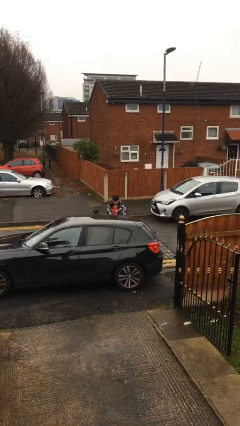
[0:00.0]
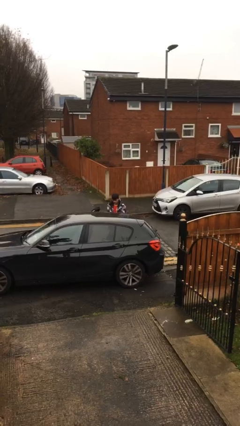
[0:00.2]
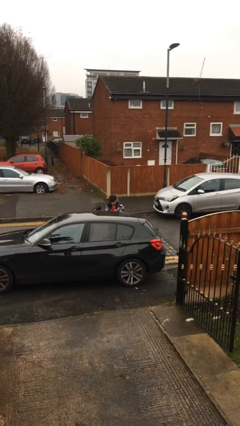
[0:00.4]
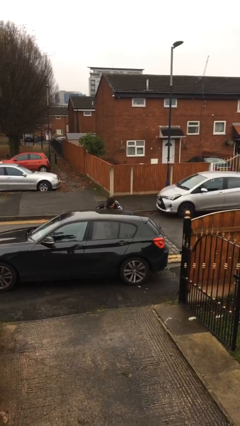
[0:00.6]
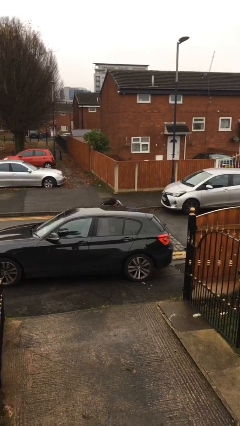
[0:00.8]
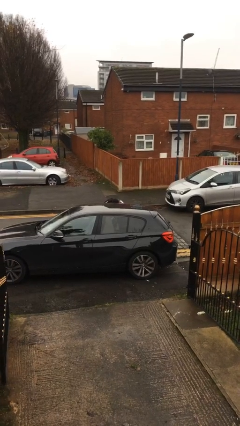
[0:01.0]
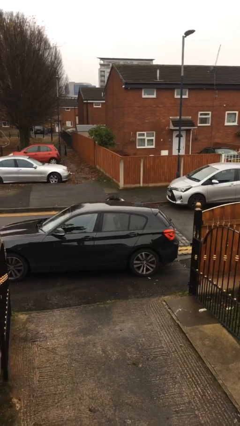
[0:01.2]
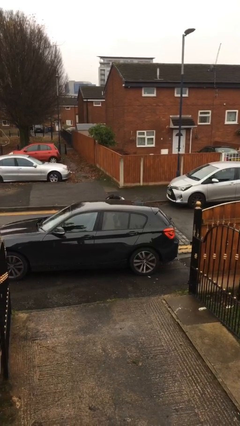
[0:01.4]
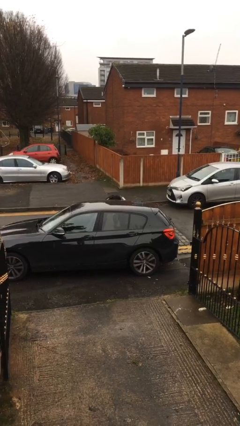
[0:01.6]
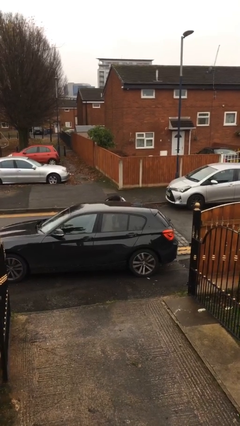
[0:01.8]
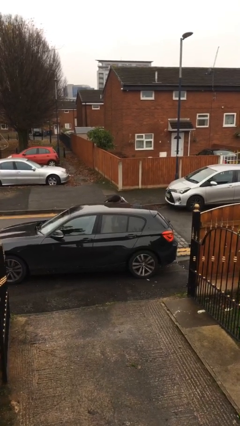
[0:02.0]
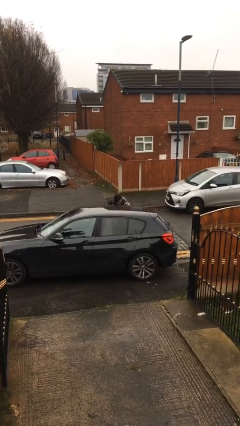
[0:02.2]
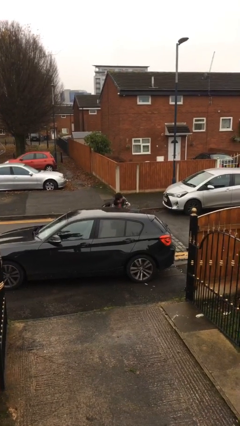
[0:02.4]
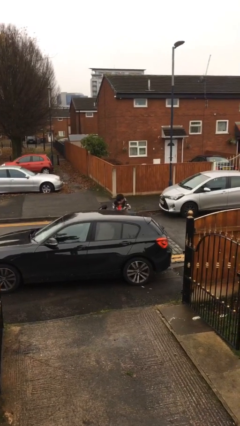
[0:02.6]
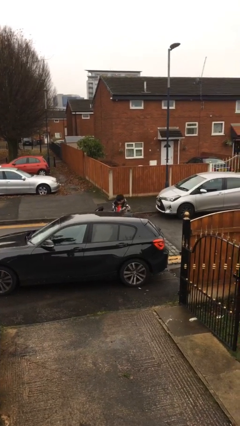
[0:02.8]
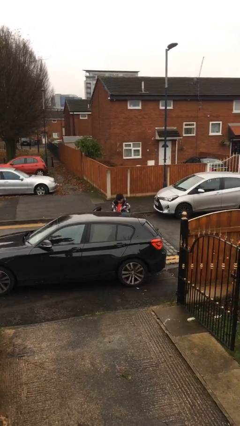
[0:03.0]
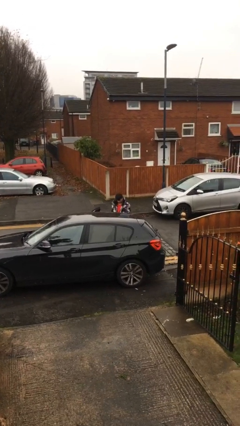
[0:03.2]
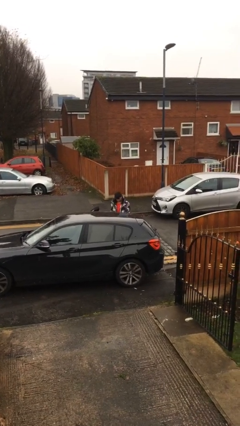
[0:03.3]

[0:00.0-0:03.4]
person unloads car

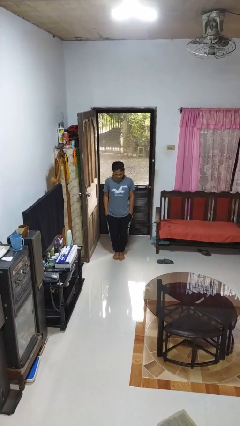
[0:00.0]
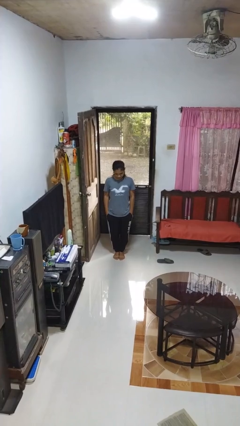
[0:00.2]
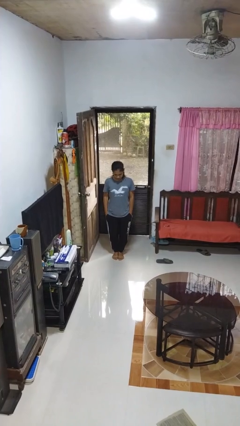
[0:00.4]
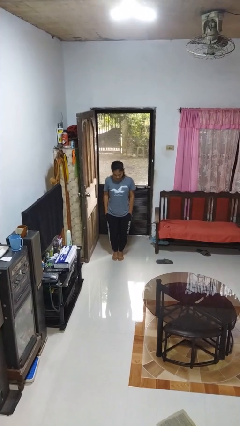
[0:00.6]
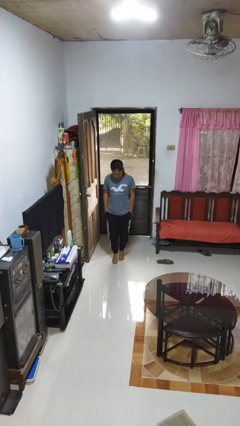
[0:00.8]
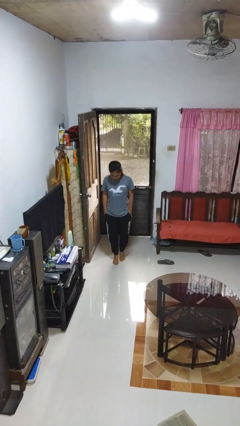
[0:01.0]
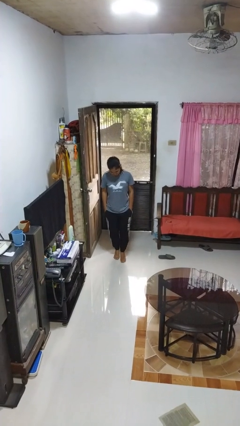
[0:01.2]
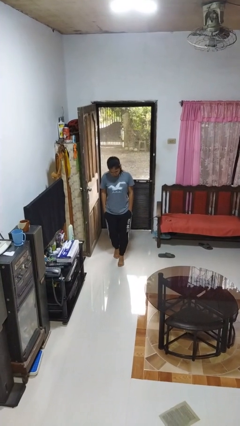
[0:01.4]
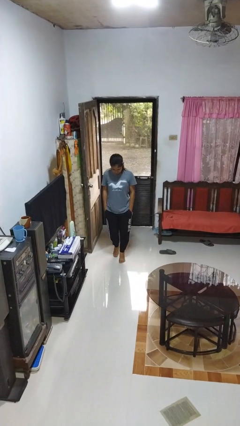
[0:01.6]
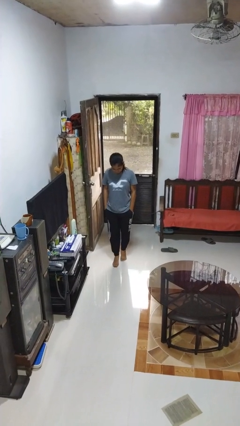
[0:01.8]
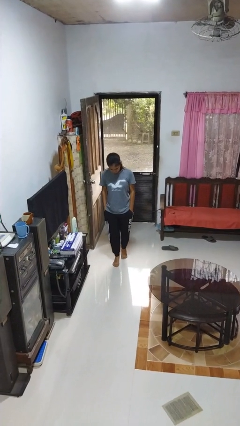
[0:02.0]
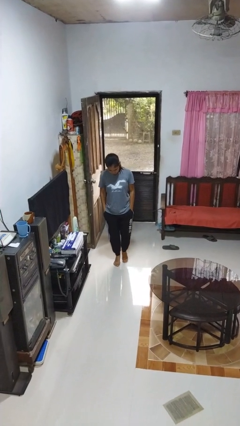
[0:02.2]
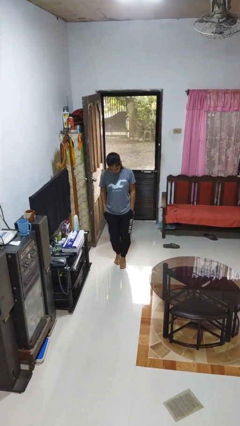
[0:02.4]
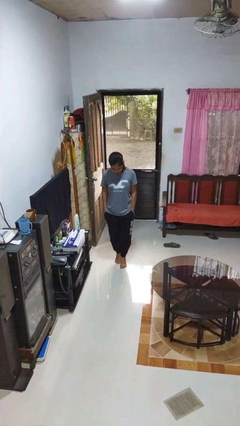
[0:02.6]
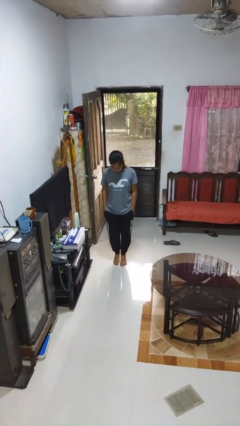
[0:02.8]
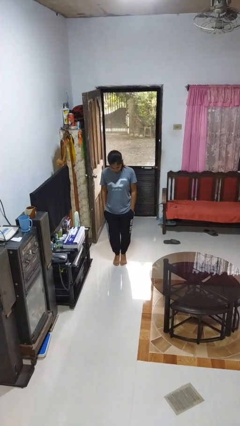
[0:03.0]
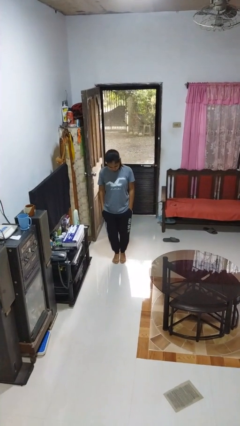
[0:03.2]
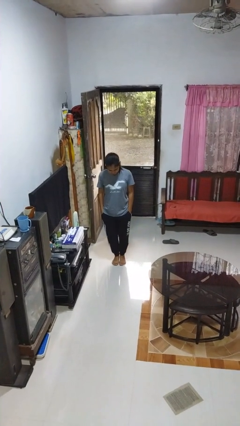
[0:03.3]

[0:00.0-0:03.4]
person walks tiptoe

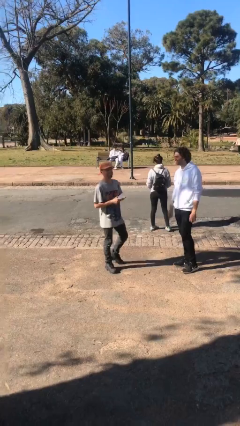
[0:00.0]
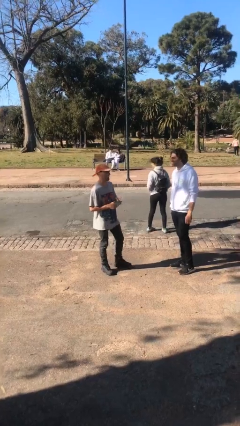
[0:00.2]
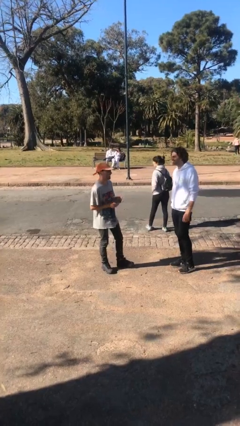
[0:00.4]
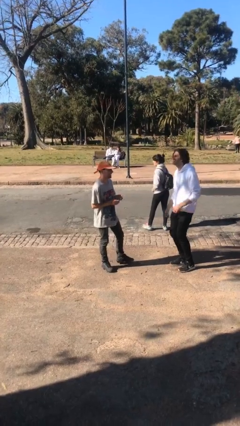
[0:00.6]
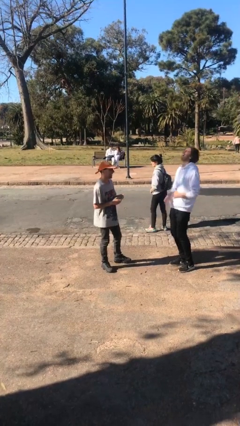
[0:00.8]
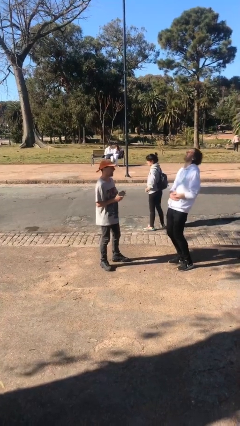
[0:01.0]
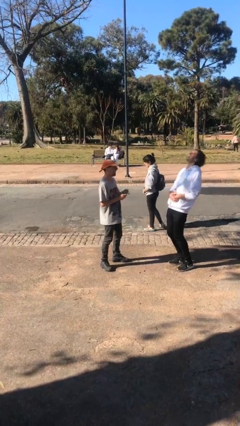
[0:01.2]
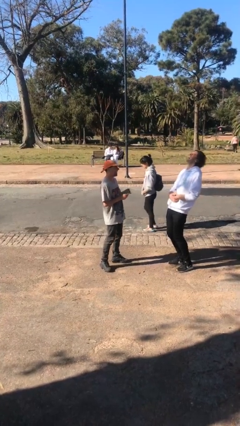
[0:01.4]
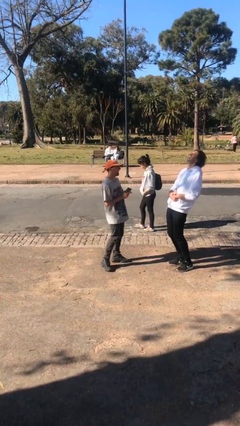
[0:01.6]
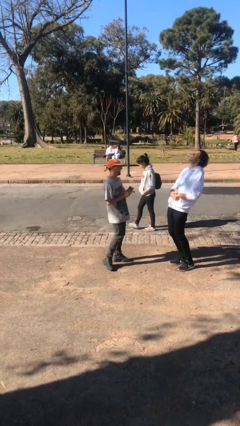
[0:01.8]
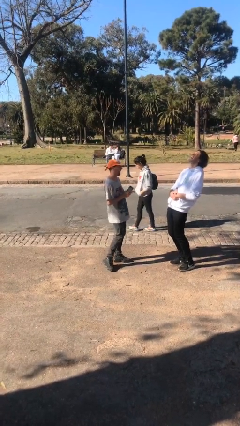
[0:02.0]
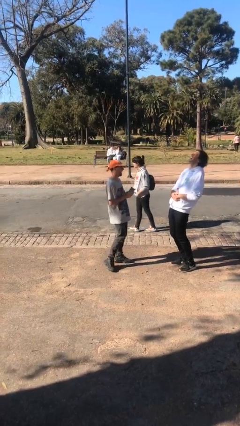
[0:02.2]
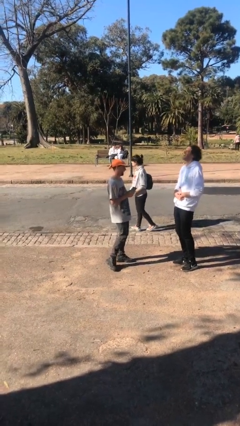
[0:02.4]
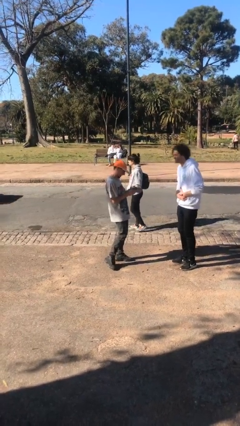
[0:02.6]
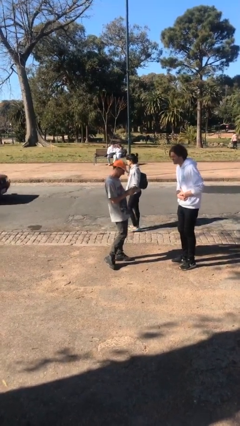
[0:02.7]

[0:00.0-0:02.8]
person laughs with person

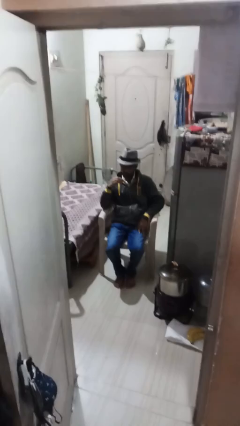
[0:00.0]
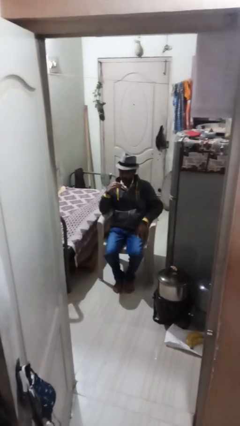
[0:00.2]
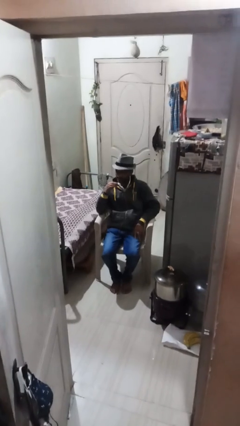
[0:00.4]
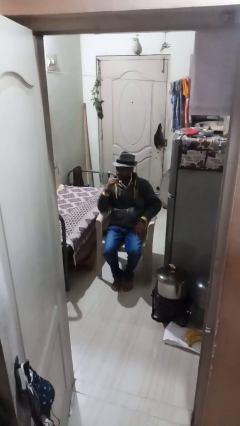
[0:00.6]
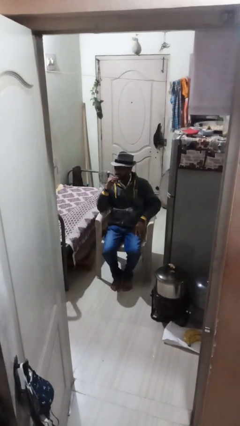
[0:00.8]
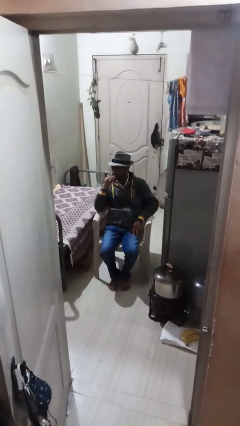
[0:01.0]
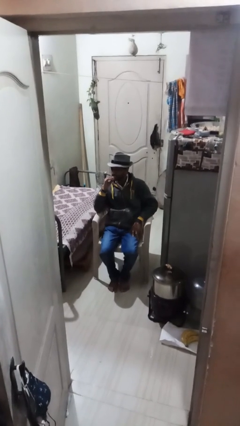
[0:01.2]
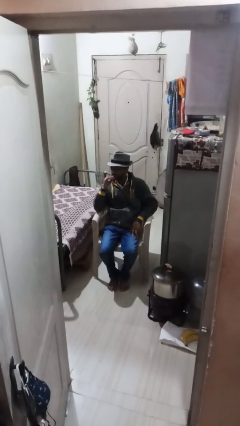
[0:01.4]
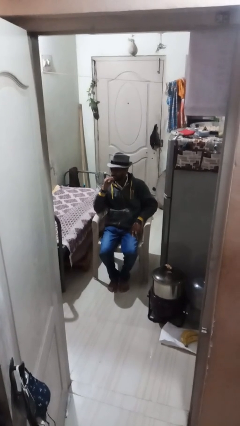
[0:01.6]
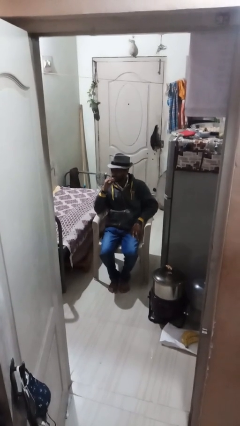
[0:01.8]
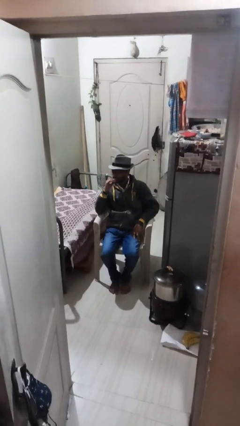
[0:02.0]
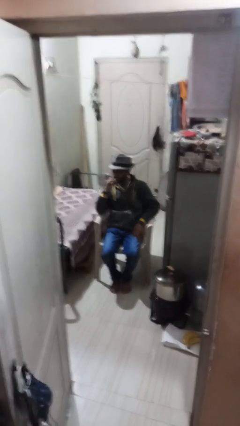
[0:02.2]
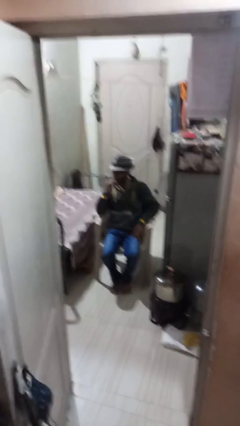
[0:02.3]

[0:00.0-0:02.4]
person flosses

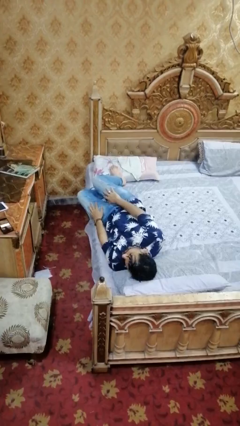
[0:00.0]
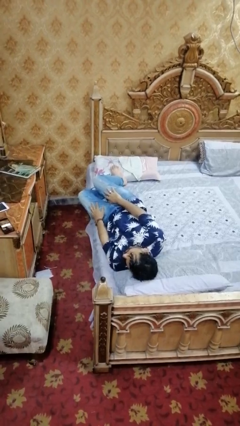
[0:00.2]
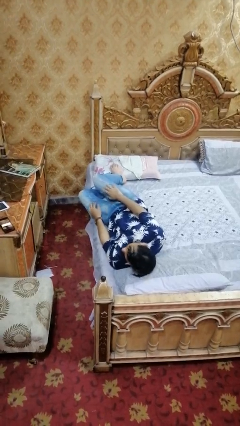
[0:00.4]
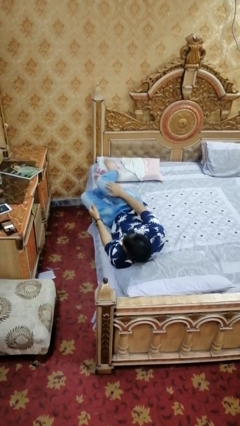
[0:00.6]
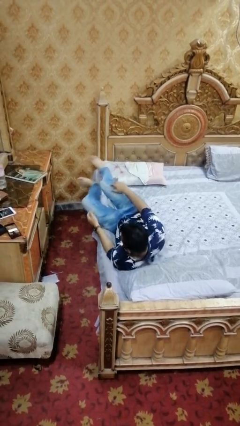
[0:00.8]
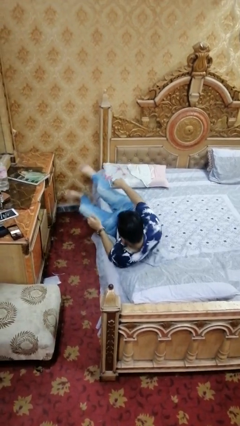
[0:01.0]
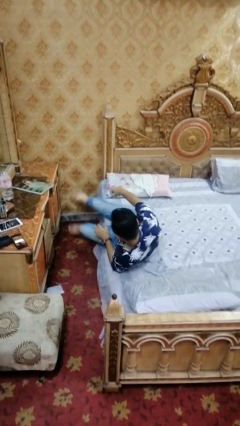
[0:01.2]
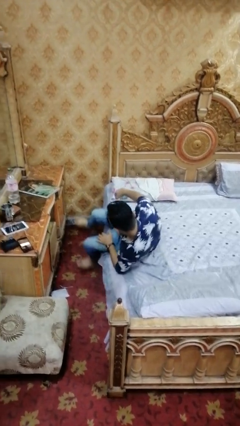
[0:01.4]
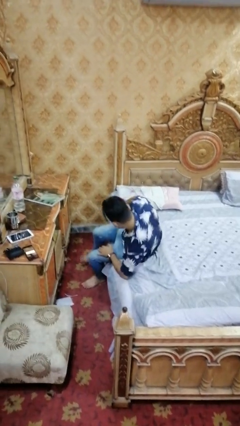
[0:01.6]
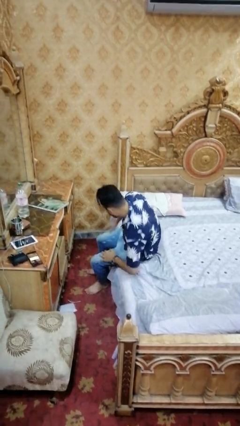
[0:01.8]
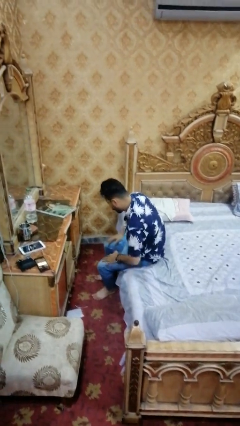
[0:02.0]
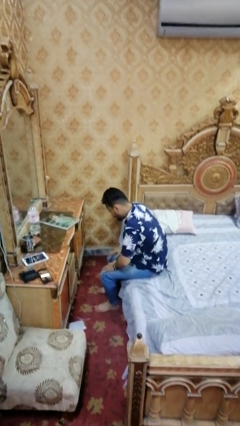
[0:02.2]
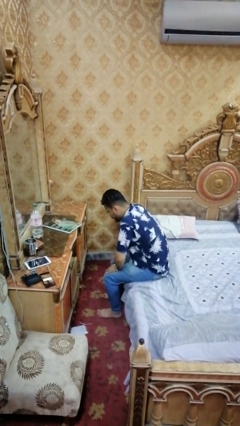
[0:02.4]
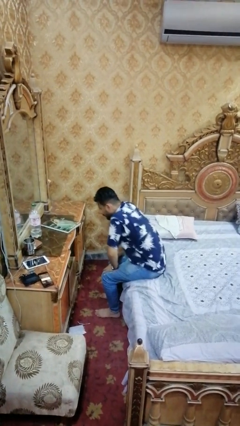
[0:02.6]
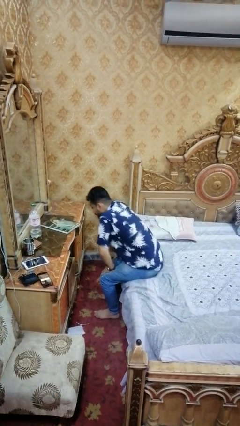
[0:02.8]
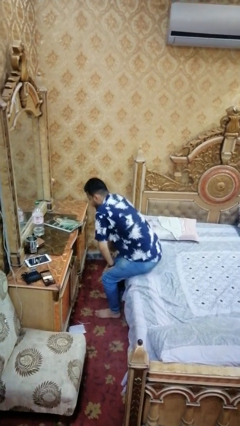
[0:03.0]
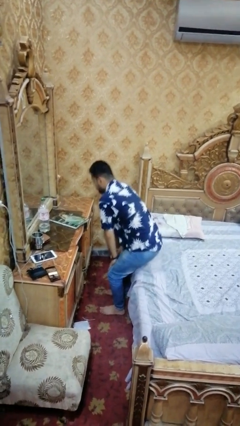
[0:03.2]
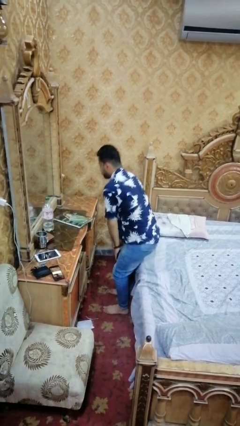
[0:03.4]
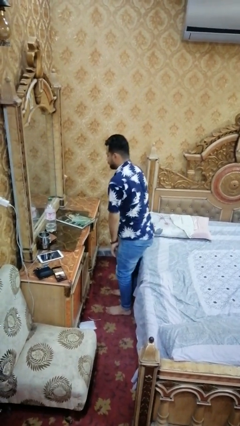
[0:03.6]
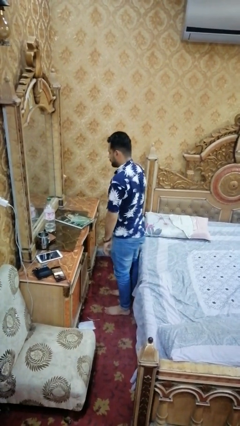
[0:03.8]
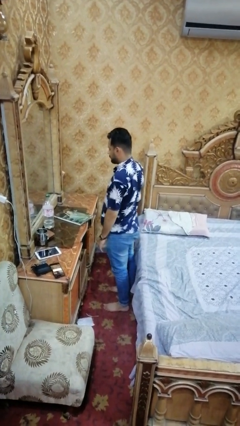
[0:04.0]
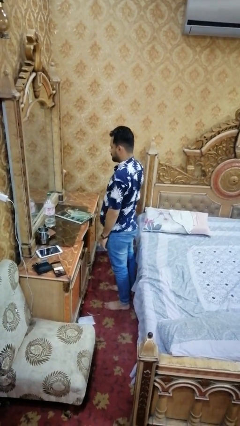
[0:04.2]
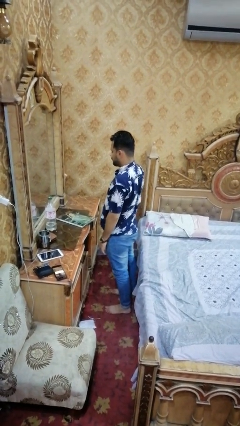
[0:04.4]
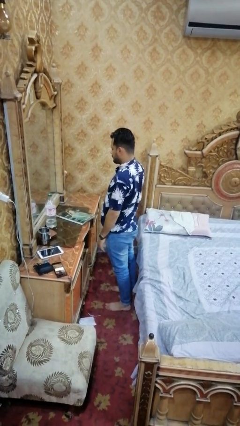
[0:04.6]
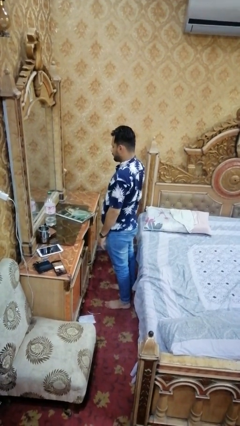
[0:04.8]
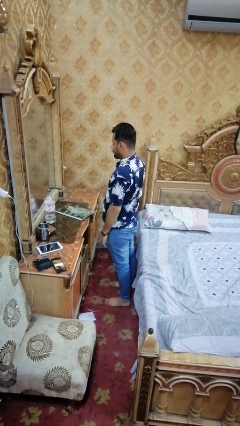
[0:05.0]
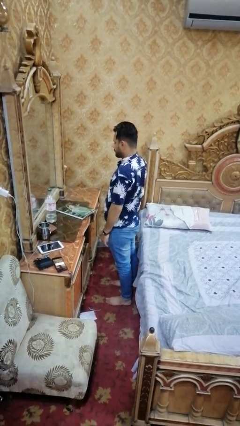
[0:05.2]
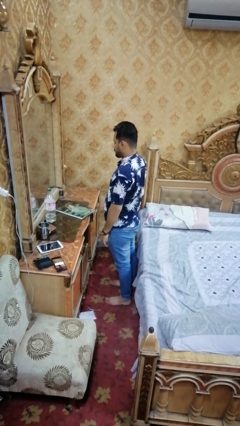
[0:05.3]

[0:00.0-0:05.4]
person stands up
